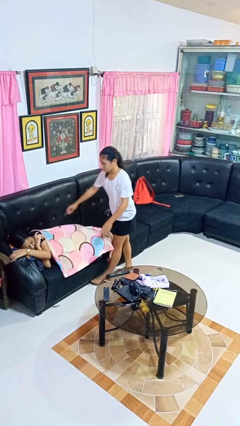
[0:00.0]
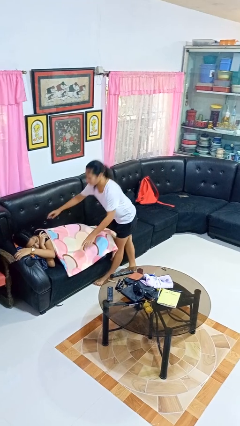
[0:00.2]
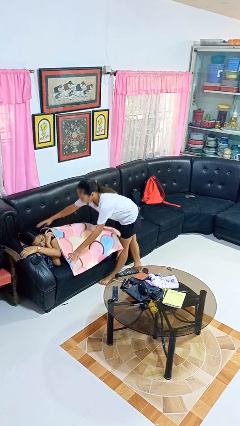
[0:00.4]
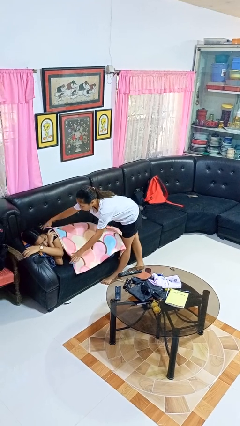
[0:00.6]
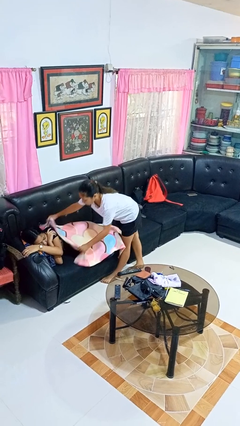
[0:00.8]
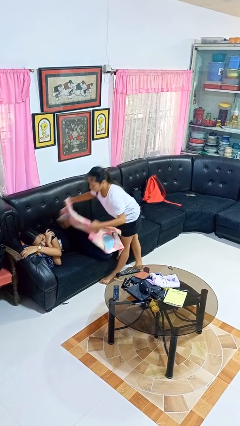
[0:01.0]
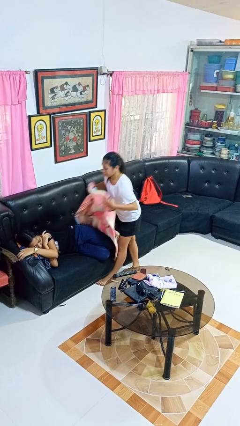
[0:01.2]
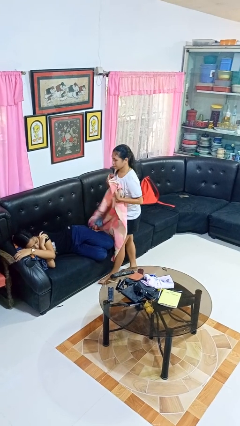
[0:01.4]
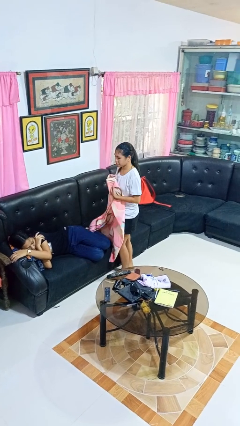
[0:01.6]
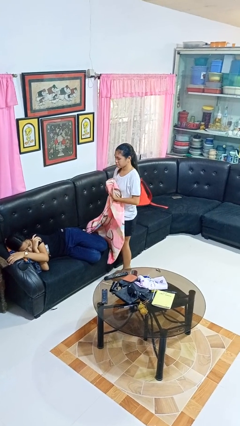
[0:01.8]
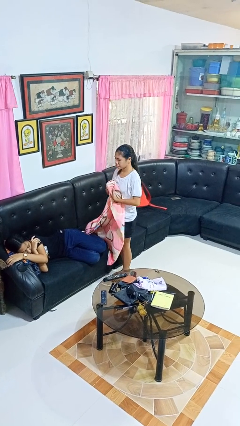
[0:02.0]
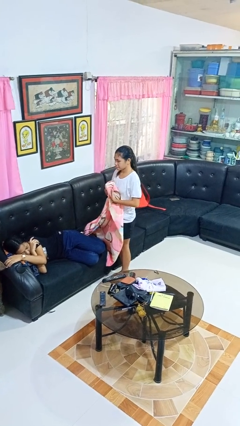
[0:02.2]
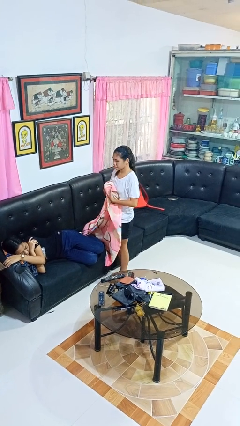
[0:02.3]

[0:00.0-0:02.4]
person uncovers friend with blanket

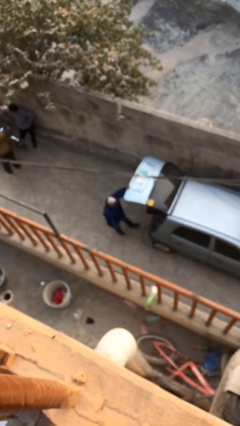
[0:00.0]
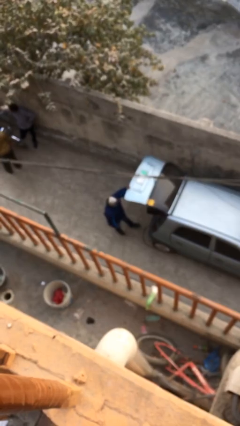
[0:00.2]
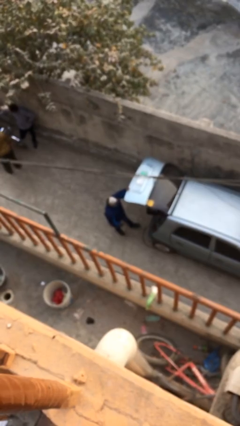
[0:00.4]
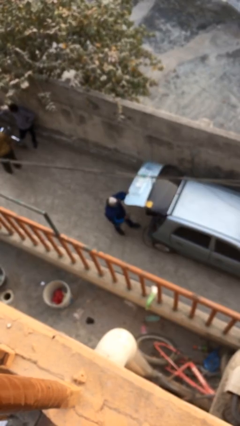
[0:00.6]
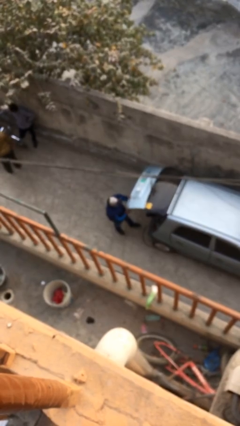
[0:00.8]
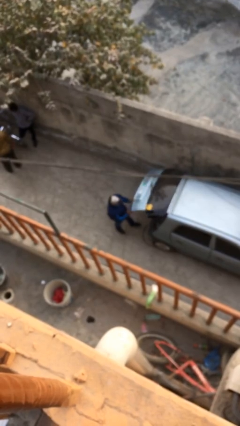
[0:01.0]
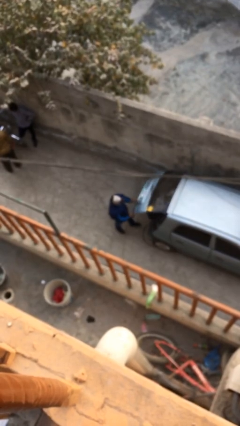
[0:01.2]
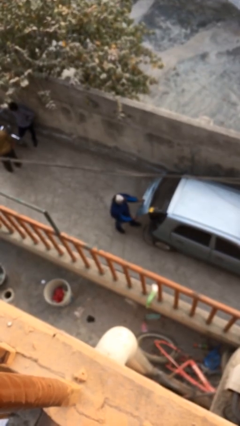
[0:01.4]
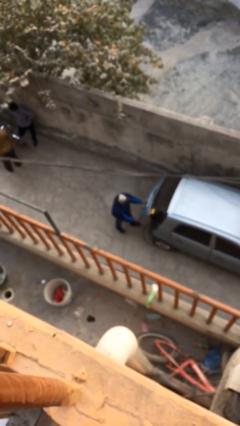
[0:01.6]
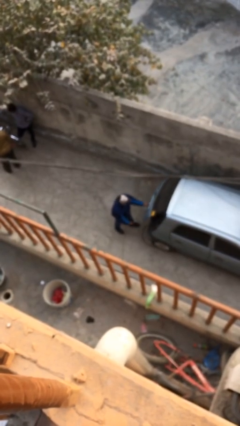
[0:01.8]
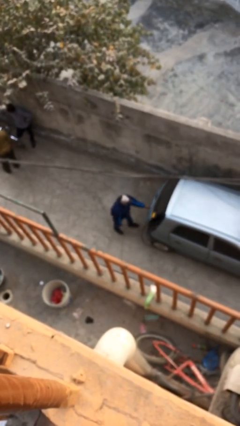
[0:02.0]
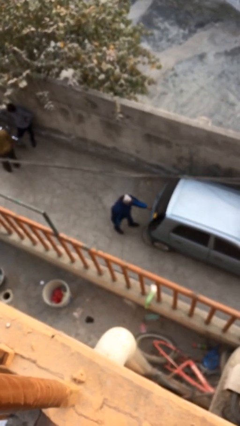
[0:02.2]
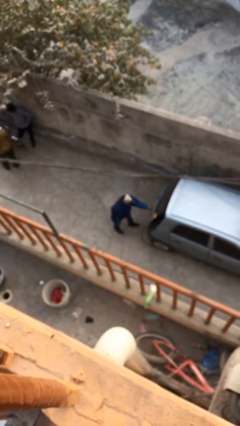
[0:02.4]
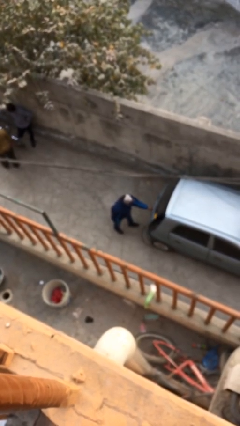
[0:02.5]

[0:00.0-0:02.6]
person closes car trunk

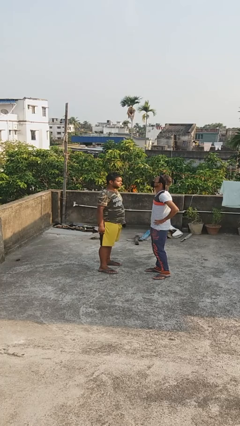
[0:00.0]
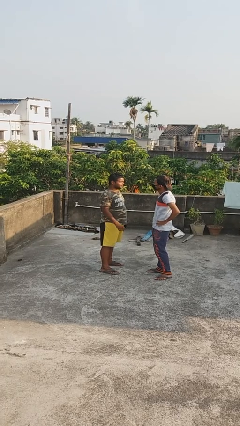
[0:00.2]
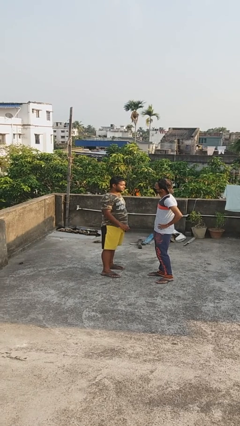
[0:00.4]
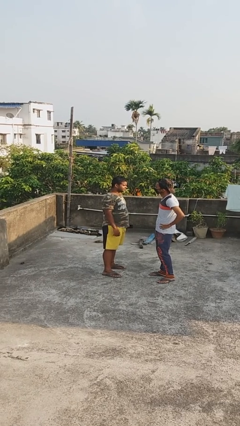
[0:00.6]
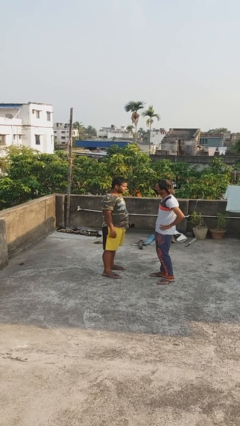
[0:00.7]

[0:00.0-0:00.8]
person highfives hand

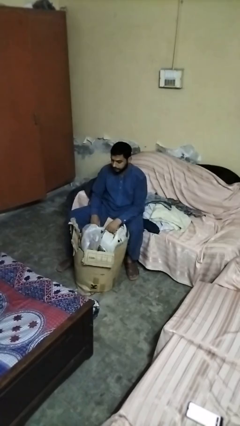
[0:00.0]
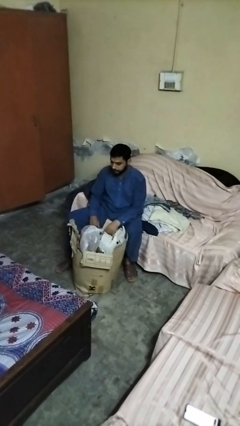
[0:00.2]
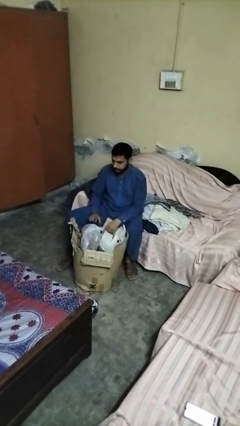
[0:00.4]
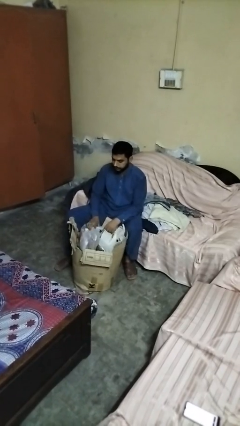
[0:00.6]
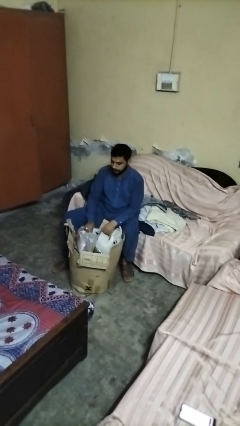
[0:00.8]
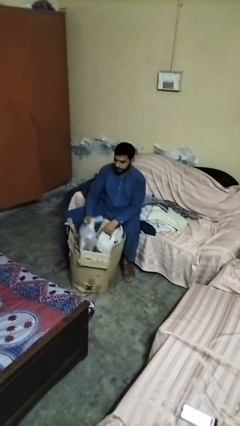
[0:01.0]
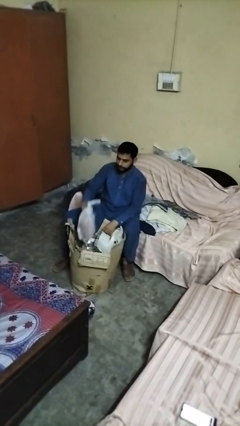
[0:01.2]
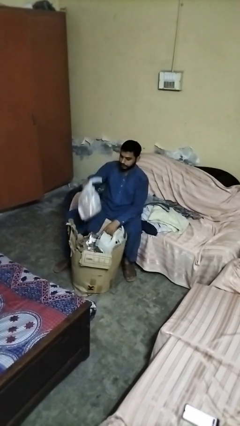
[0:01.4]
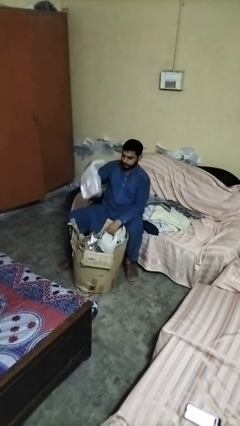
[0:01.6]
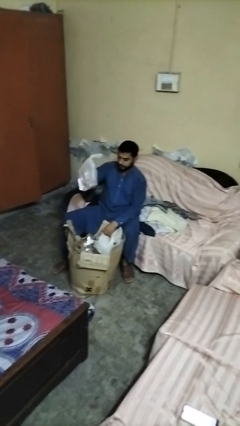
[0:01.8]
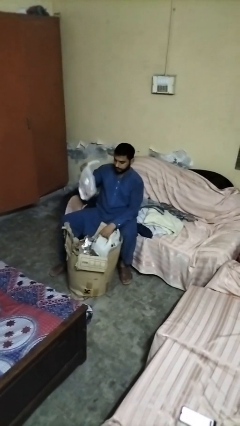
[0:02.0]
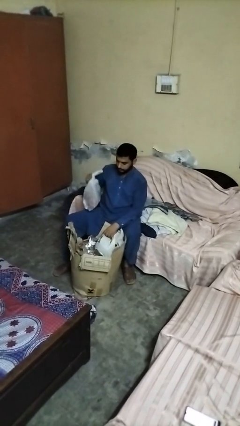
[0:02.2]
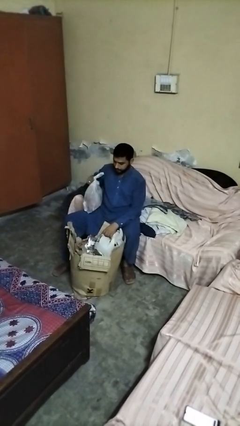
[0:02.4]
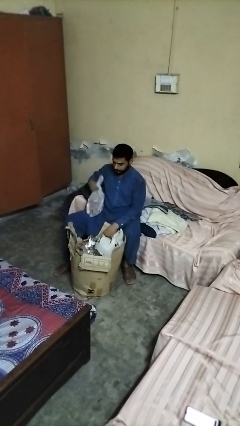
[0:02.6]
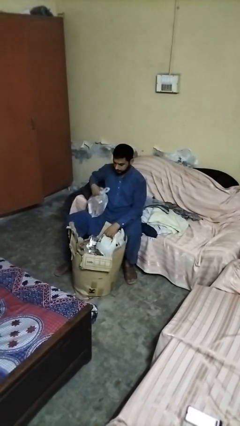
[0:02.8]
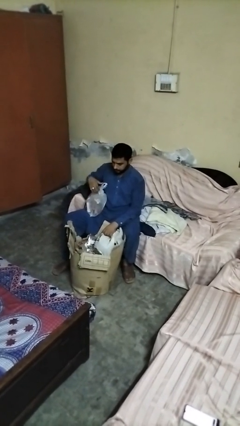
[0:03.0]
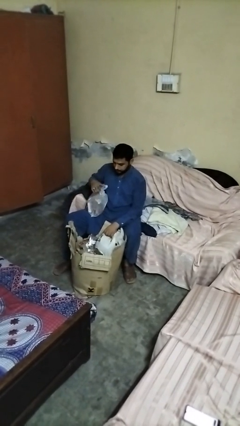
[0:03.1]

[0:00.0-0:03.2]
person takes object from box

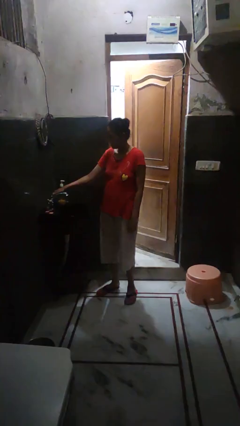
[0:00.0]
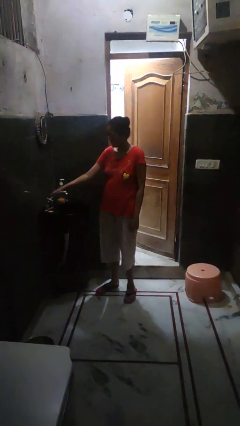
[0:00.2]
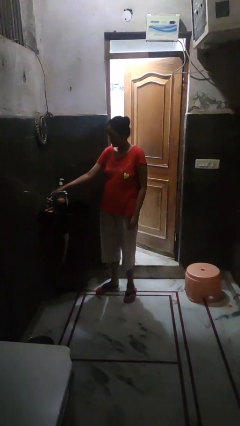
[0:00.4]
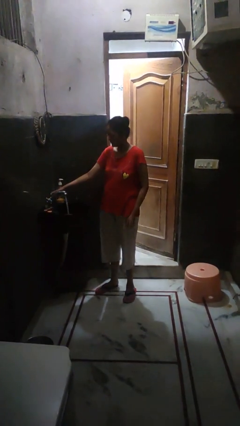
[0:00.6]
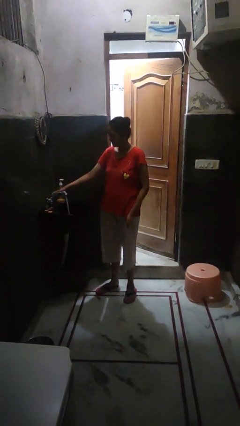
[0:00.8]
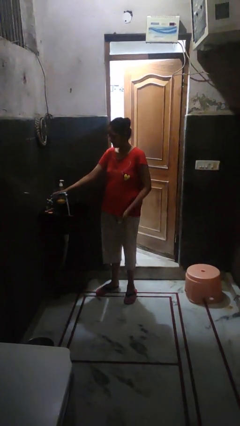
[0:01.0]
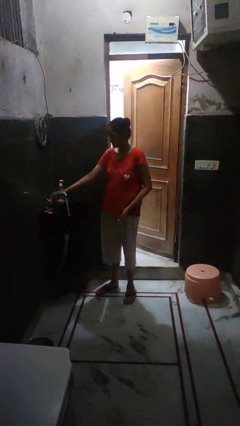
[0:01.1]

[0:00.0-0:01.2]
person turns on faucet

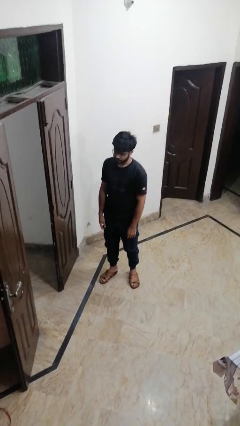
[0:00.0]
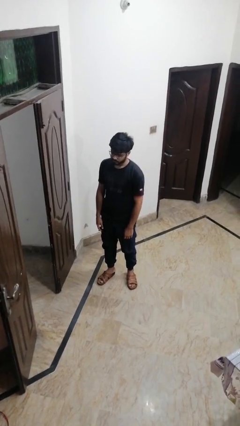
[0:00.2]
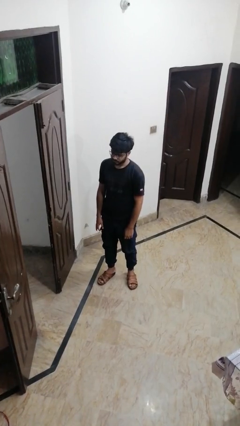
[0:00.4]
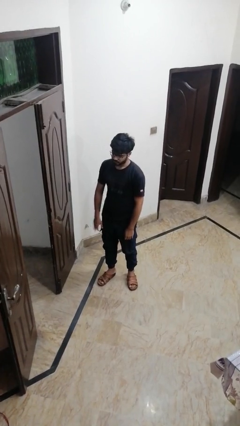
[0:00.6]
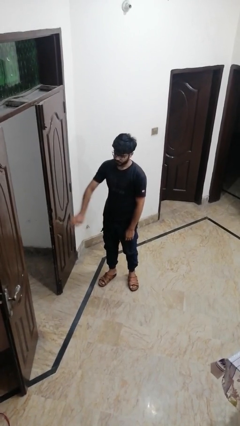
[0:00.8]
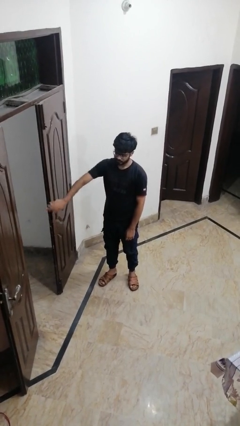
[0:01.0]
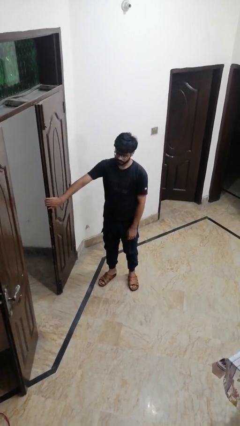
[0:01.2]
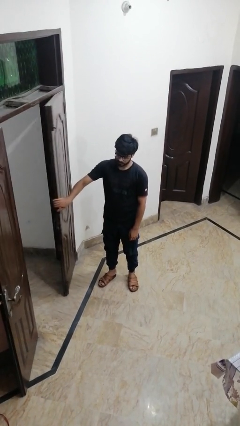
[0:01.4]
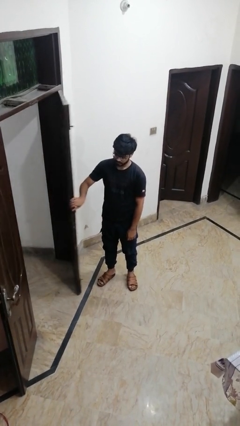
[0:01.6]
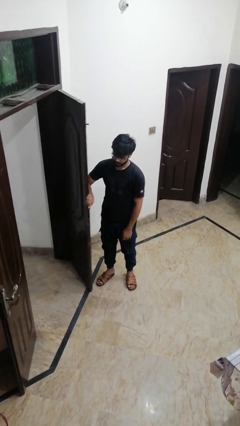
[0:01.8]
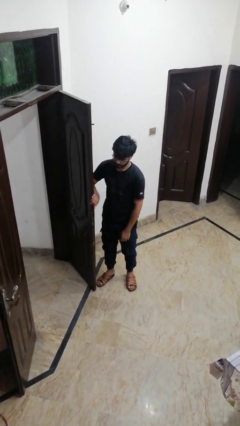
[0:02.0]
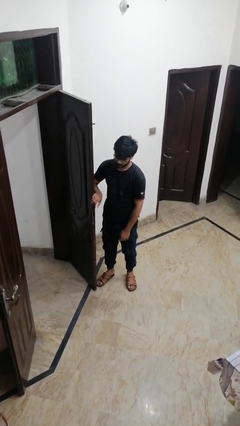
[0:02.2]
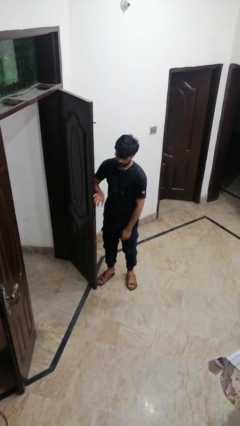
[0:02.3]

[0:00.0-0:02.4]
person opens facility door

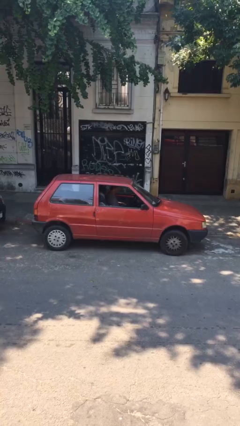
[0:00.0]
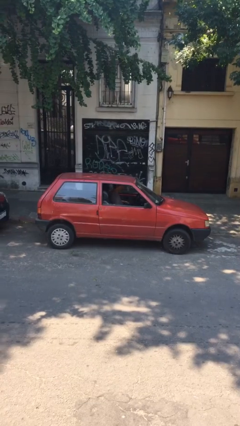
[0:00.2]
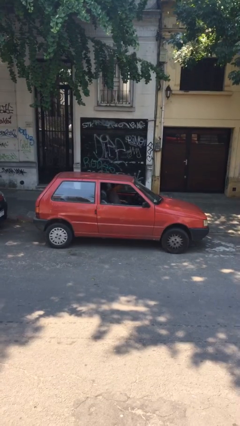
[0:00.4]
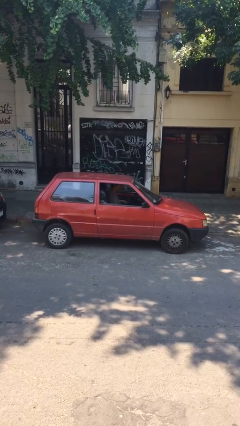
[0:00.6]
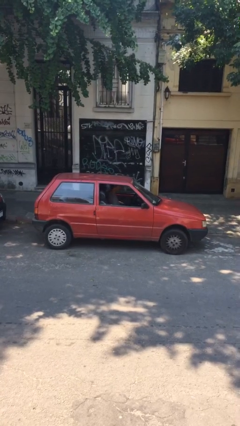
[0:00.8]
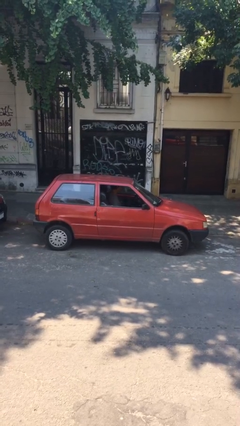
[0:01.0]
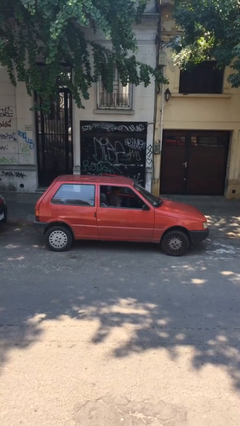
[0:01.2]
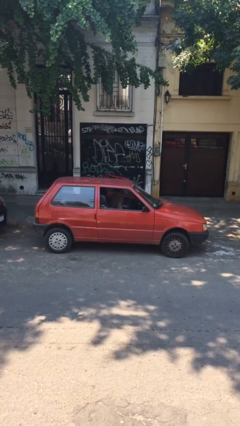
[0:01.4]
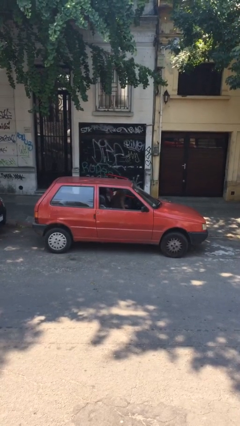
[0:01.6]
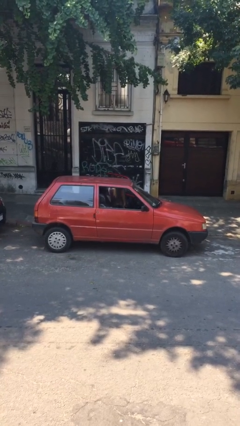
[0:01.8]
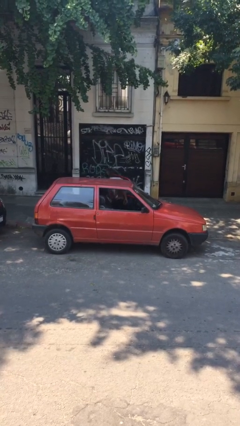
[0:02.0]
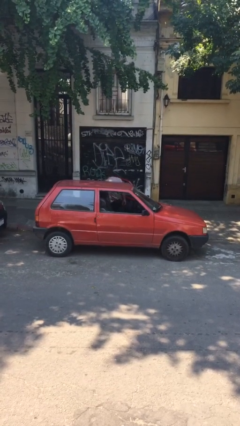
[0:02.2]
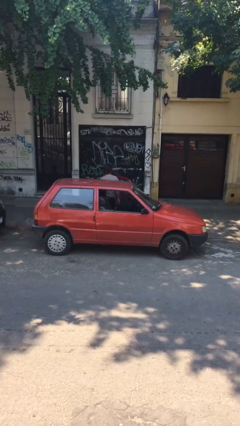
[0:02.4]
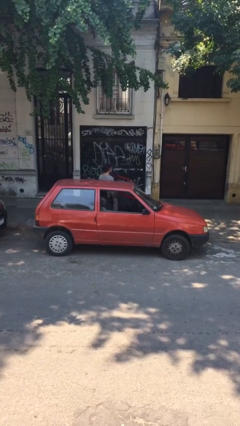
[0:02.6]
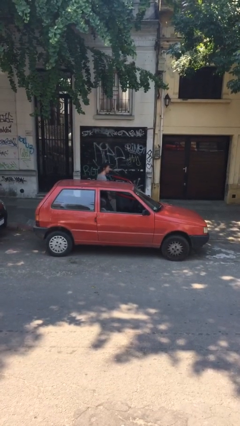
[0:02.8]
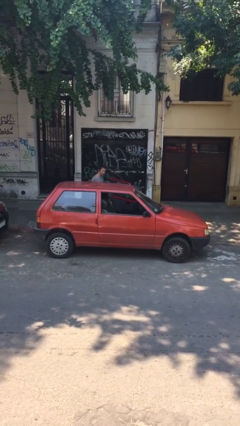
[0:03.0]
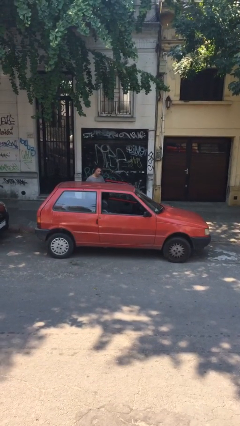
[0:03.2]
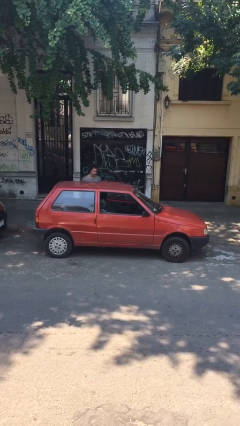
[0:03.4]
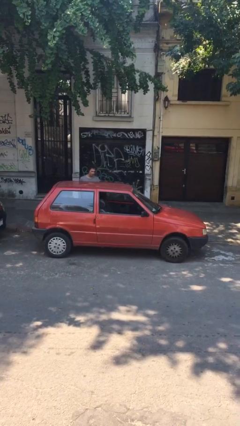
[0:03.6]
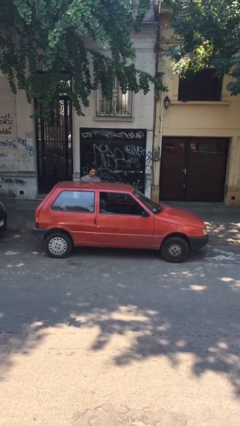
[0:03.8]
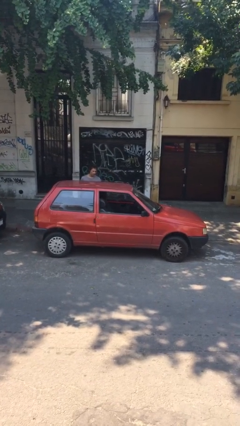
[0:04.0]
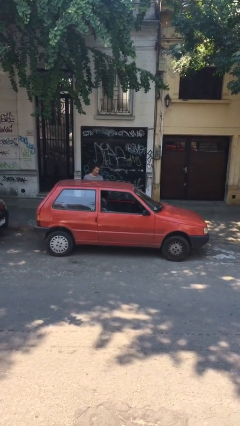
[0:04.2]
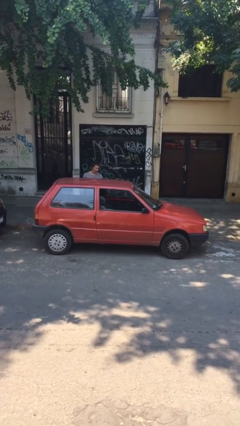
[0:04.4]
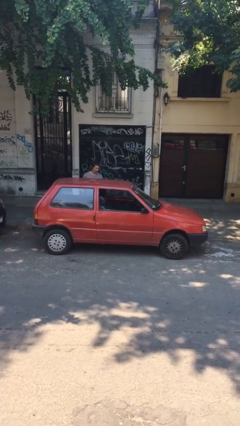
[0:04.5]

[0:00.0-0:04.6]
car drops off person
